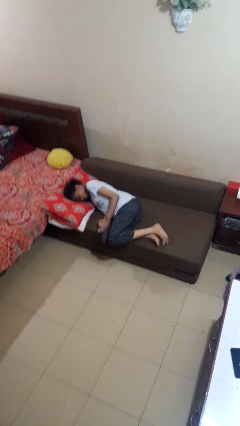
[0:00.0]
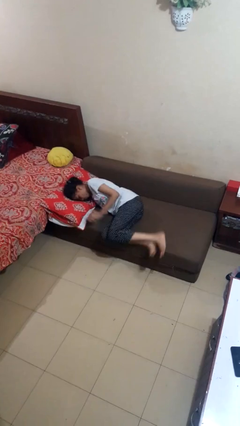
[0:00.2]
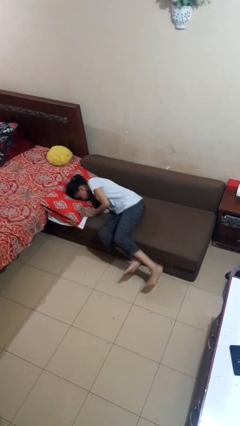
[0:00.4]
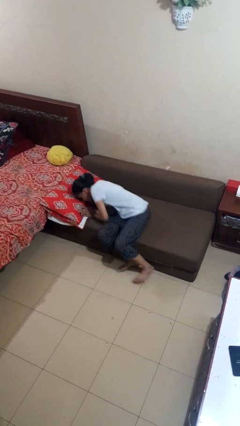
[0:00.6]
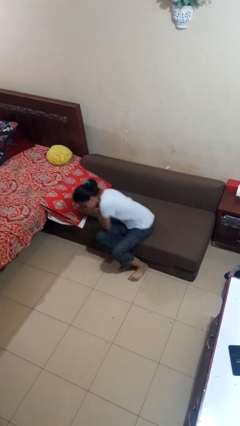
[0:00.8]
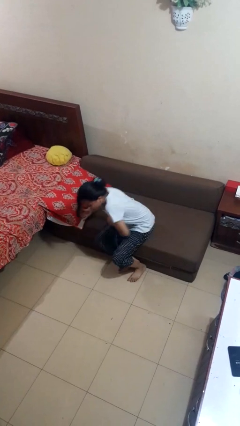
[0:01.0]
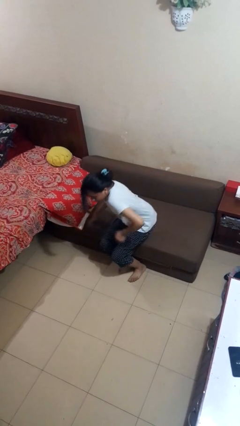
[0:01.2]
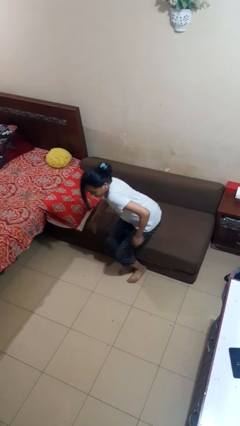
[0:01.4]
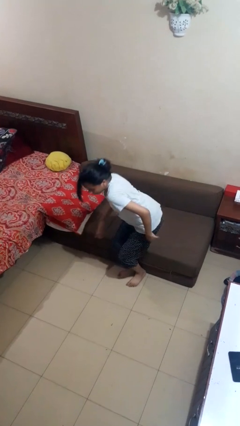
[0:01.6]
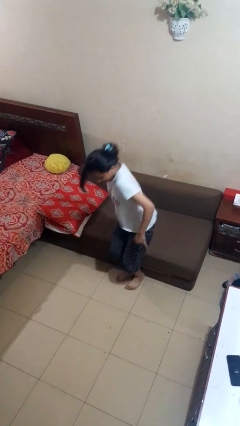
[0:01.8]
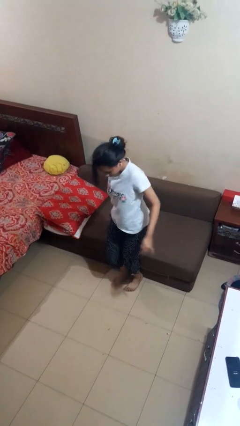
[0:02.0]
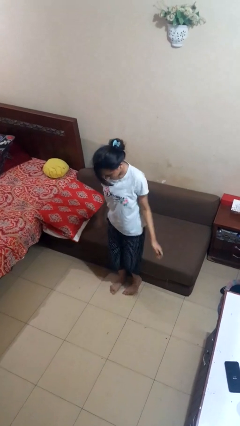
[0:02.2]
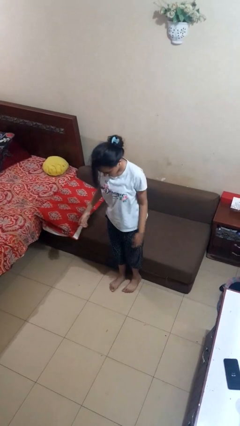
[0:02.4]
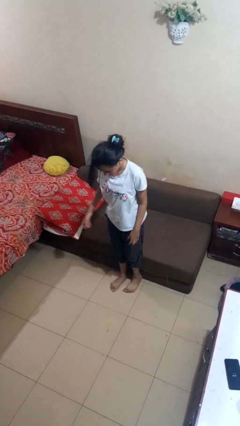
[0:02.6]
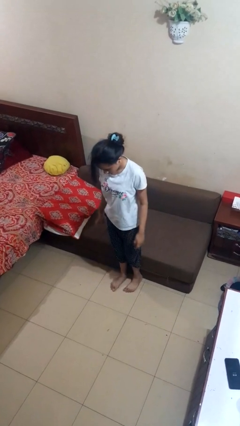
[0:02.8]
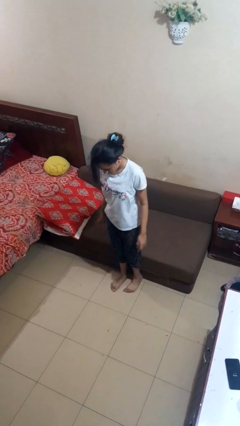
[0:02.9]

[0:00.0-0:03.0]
person stands up

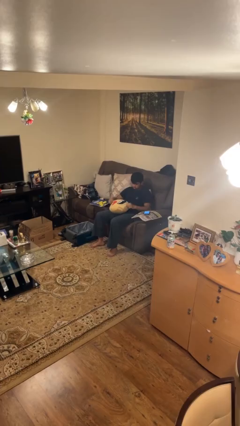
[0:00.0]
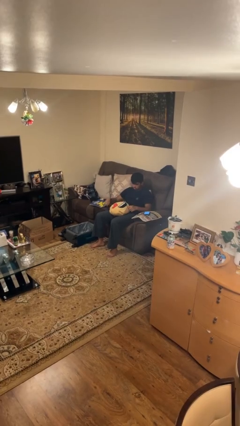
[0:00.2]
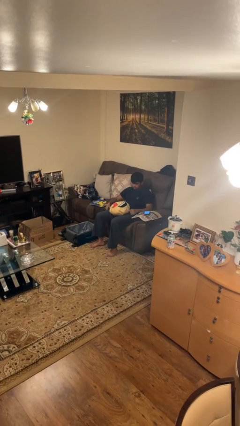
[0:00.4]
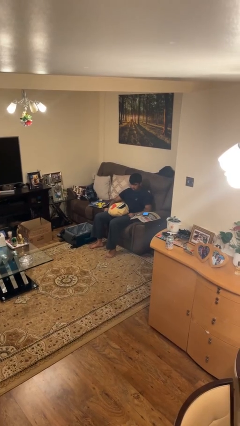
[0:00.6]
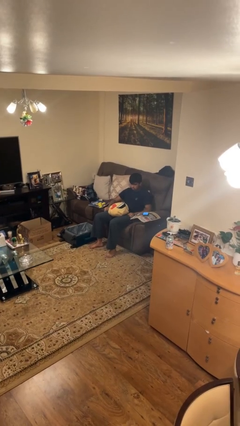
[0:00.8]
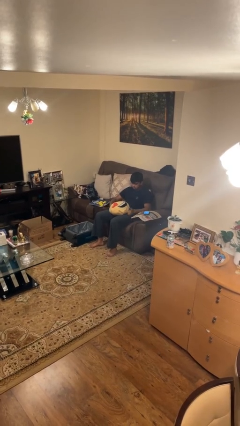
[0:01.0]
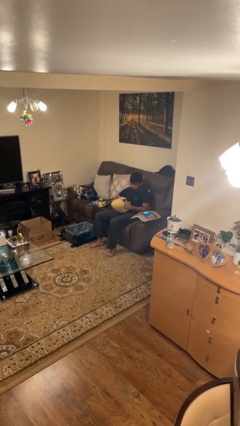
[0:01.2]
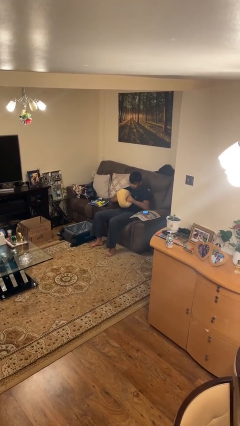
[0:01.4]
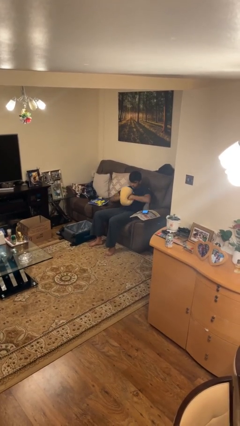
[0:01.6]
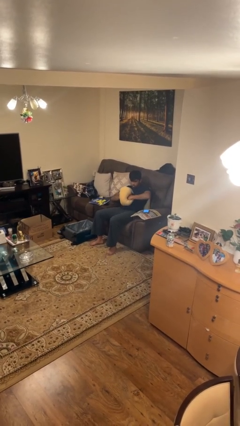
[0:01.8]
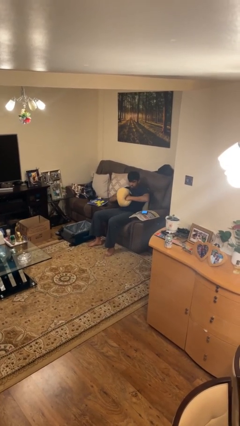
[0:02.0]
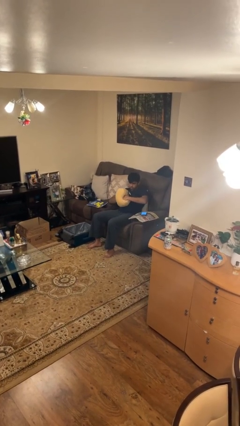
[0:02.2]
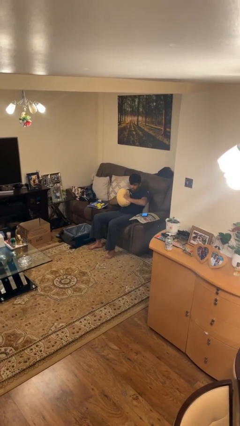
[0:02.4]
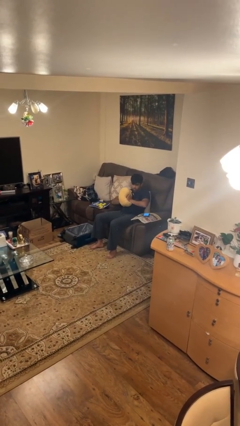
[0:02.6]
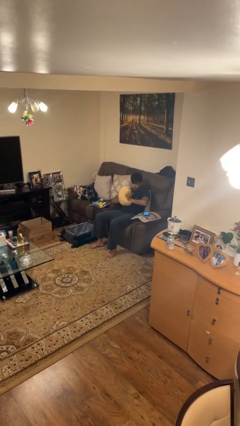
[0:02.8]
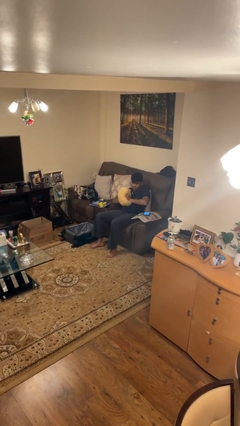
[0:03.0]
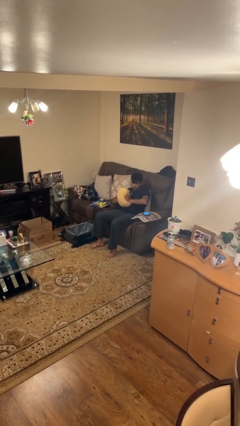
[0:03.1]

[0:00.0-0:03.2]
person squeezes object

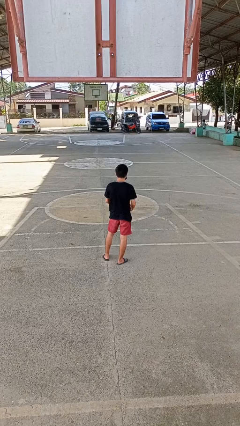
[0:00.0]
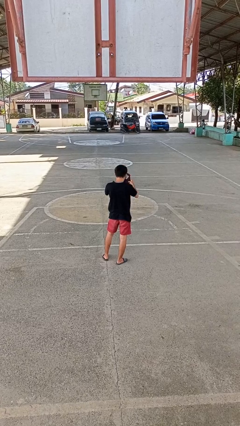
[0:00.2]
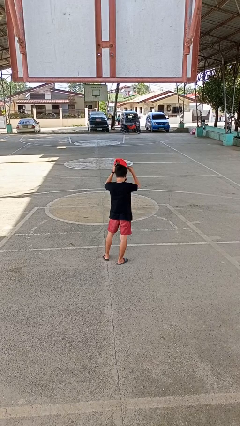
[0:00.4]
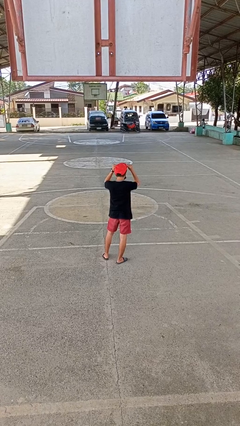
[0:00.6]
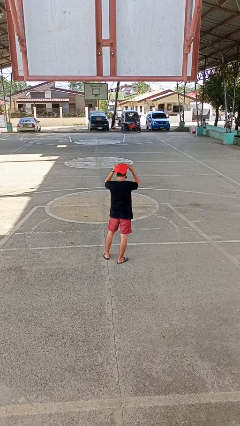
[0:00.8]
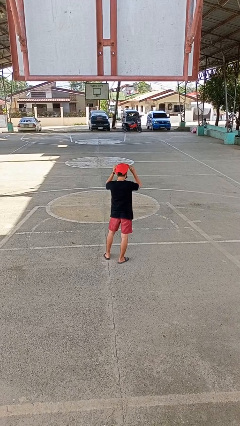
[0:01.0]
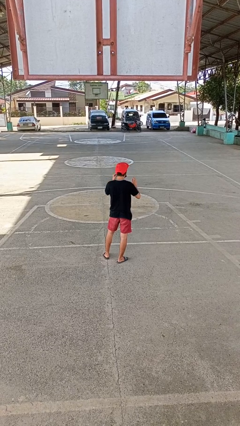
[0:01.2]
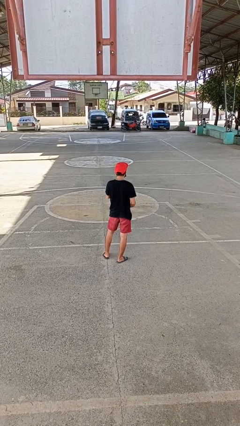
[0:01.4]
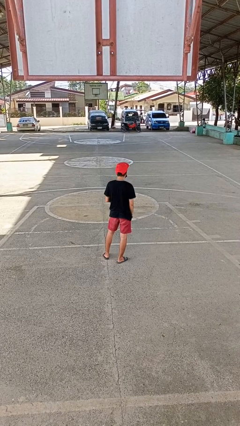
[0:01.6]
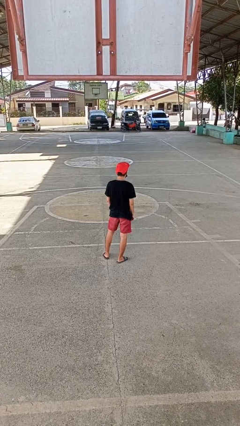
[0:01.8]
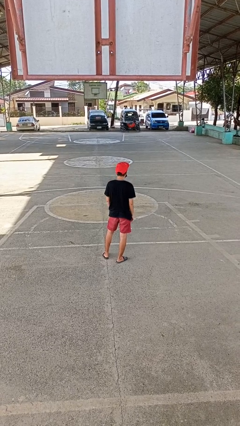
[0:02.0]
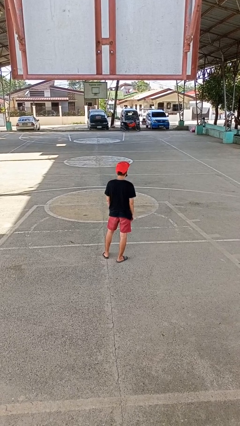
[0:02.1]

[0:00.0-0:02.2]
person puts on hat

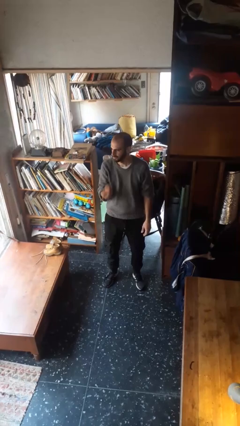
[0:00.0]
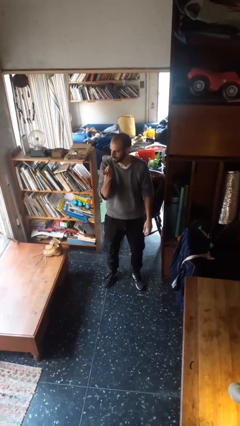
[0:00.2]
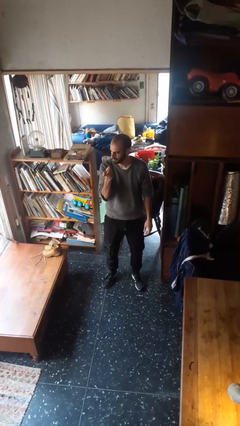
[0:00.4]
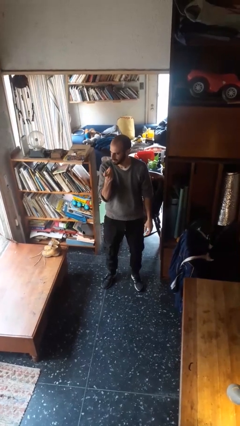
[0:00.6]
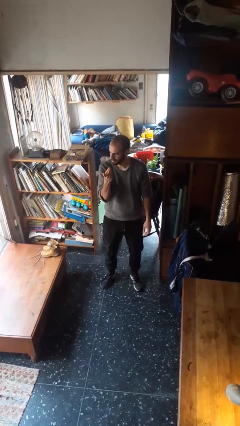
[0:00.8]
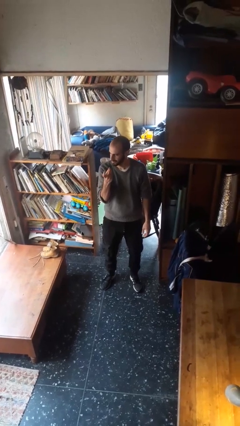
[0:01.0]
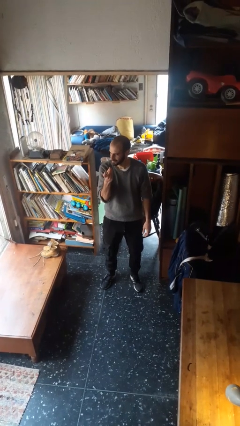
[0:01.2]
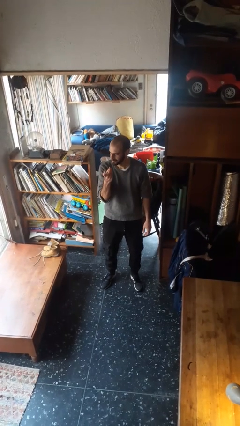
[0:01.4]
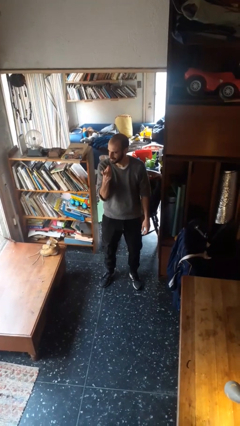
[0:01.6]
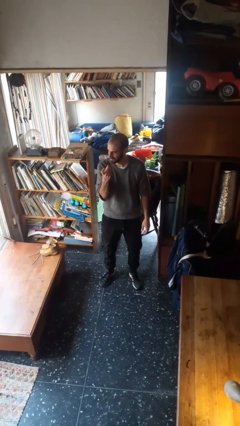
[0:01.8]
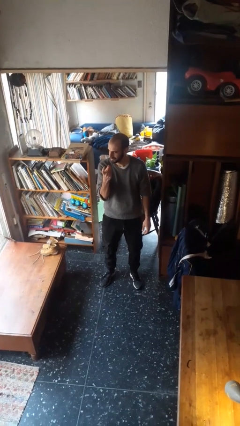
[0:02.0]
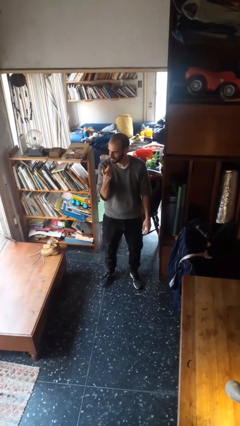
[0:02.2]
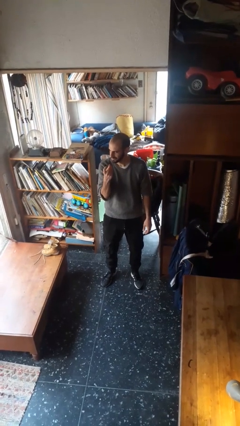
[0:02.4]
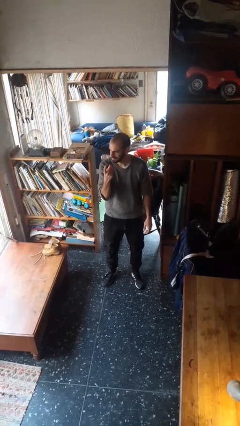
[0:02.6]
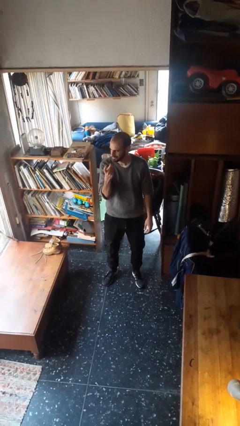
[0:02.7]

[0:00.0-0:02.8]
person gestures come here

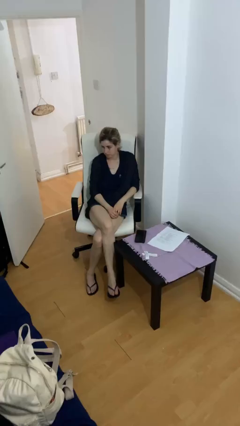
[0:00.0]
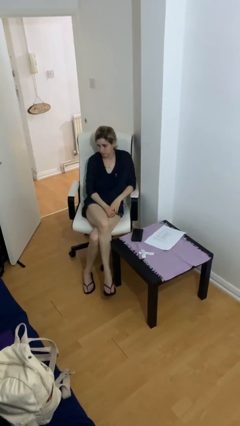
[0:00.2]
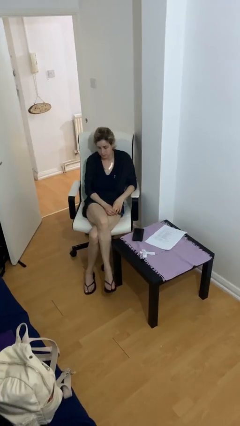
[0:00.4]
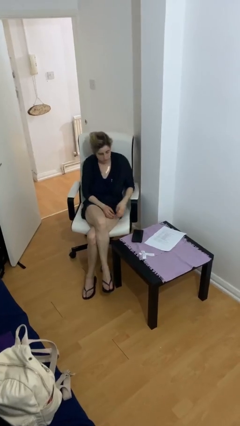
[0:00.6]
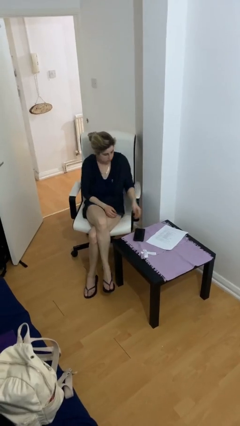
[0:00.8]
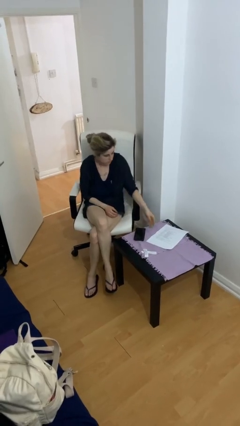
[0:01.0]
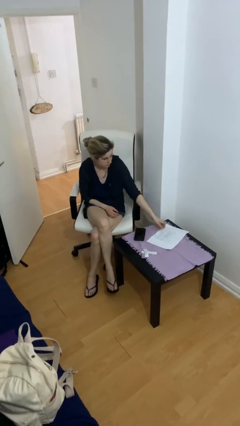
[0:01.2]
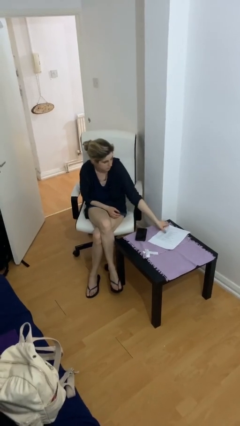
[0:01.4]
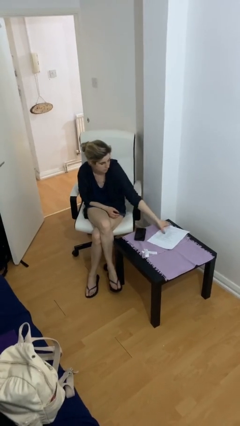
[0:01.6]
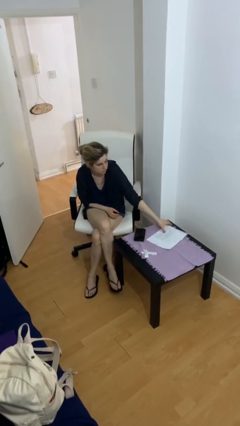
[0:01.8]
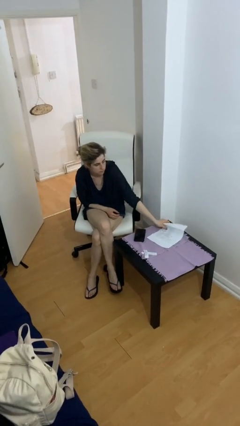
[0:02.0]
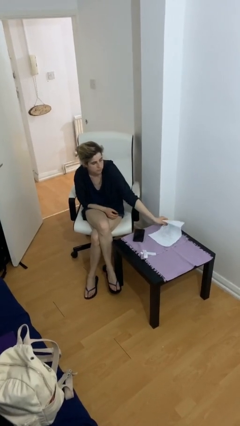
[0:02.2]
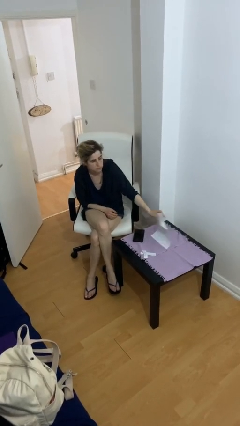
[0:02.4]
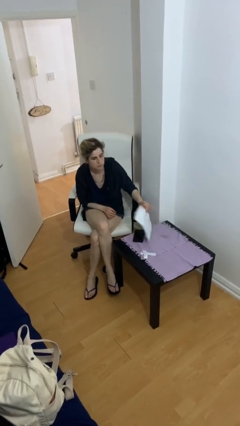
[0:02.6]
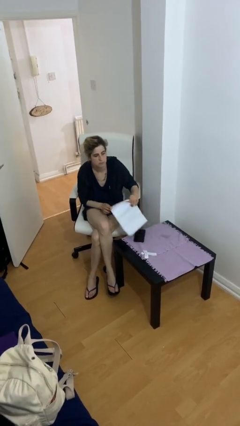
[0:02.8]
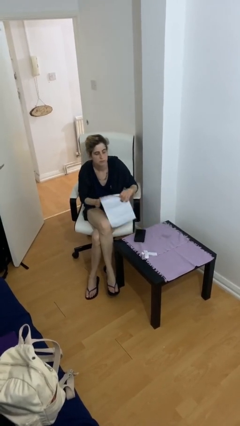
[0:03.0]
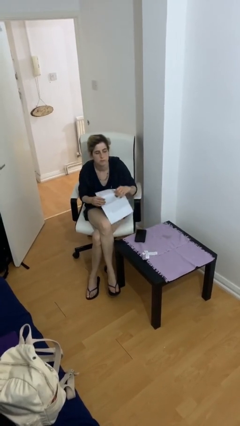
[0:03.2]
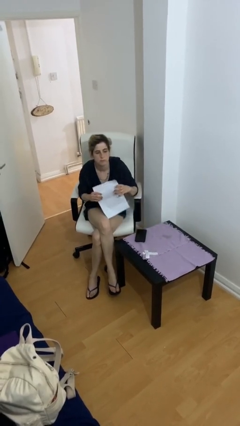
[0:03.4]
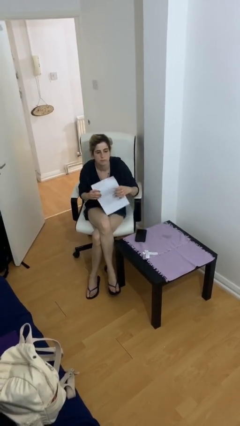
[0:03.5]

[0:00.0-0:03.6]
person picks up object from table

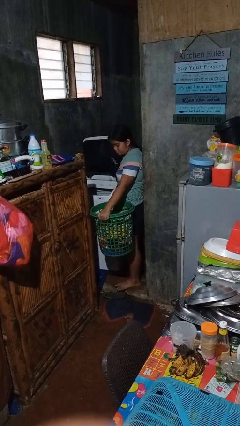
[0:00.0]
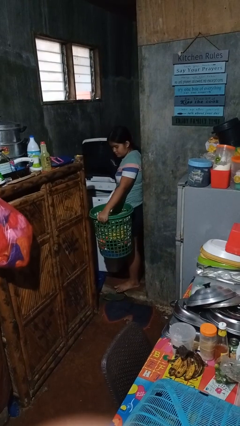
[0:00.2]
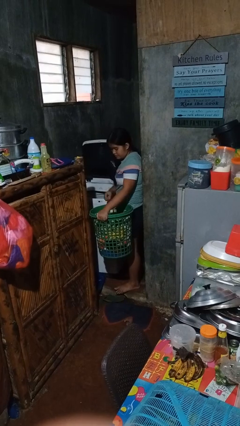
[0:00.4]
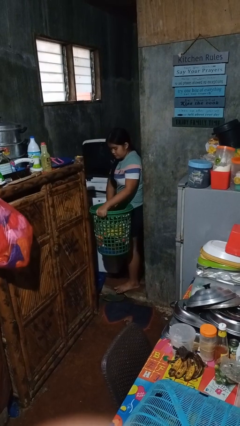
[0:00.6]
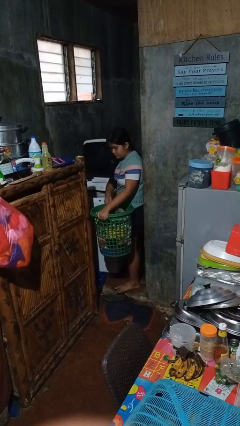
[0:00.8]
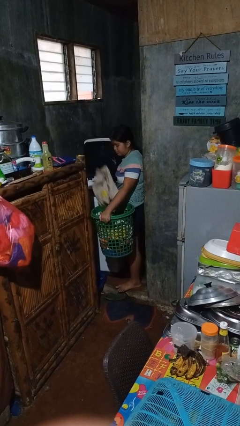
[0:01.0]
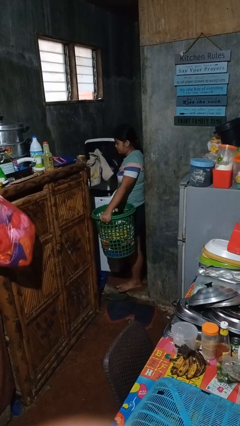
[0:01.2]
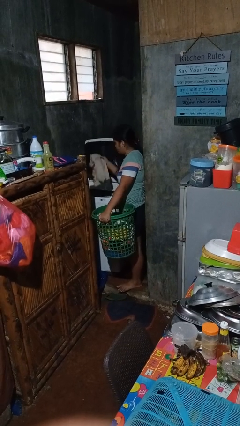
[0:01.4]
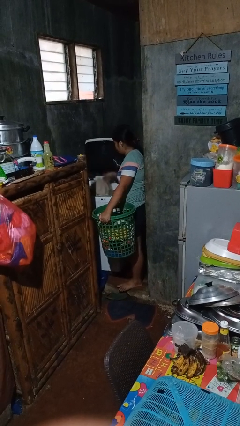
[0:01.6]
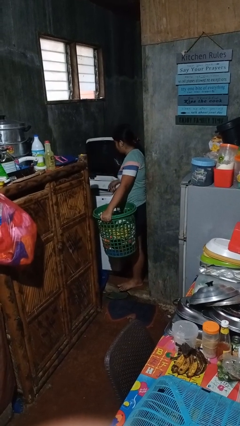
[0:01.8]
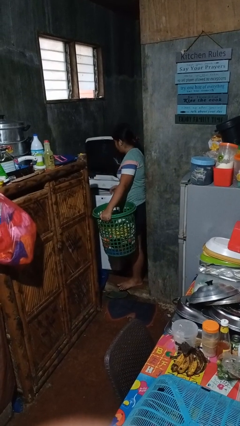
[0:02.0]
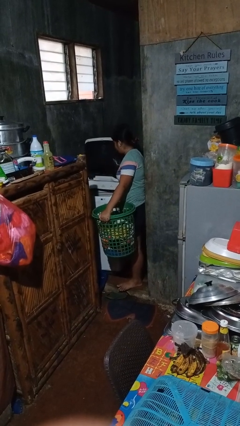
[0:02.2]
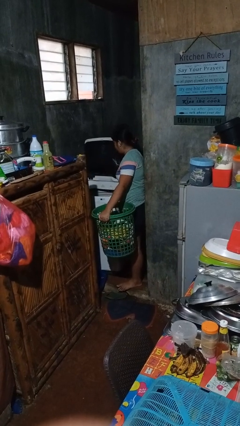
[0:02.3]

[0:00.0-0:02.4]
person loads clotheswasher
